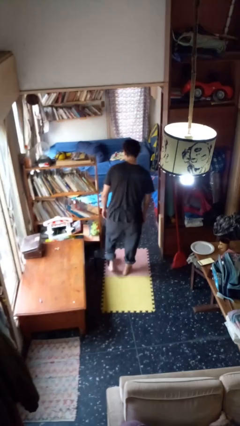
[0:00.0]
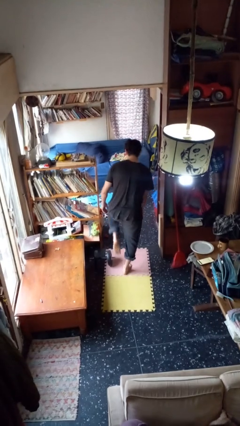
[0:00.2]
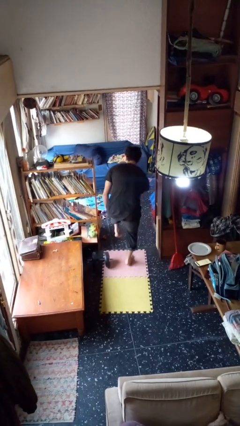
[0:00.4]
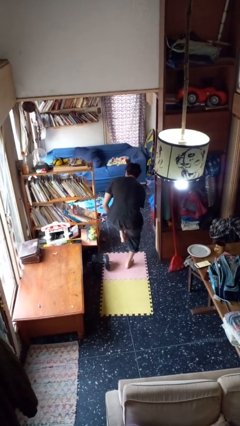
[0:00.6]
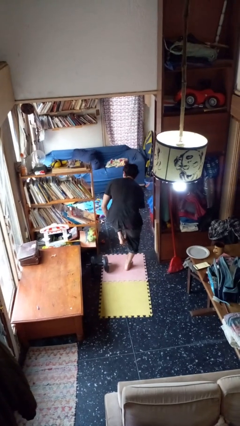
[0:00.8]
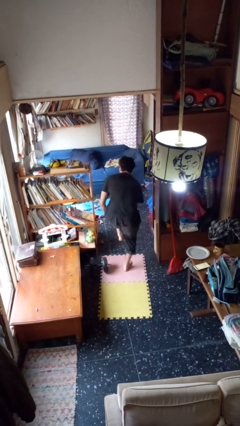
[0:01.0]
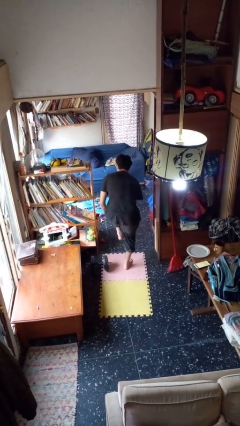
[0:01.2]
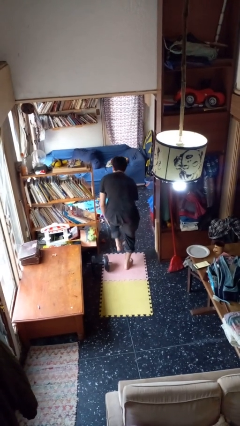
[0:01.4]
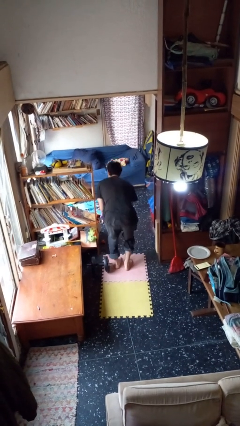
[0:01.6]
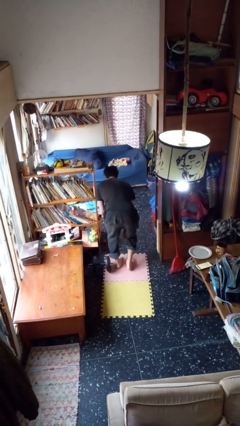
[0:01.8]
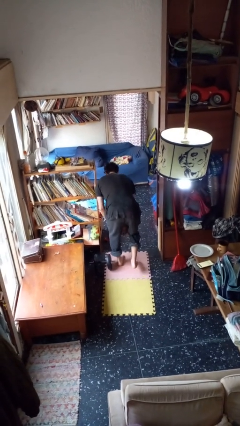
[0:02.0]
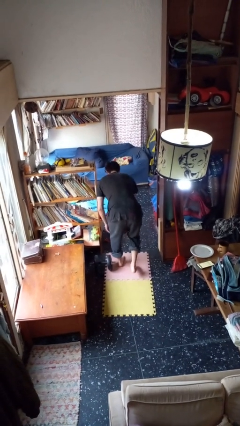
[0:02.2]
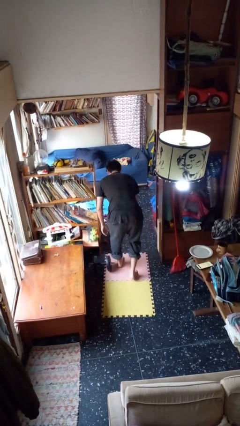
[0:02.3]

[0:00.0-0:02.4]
person stubs toe

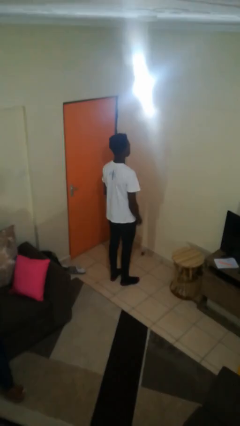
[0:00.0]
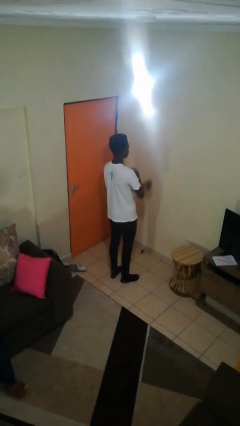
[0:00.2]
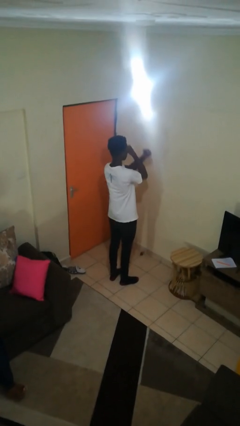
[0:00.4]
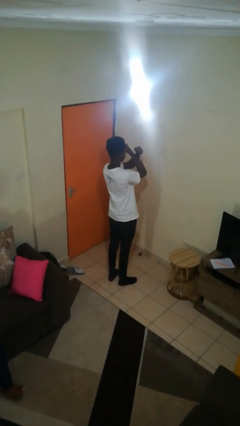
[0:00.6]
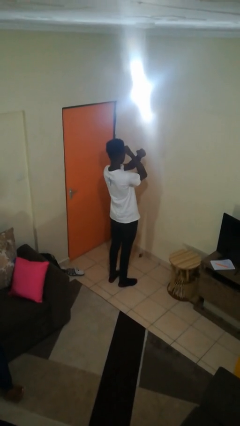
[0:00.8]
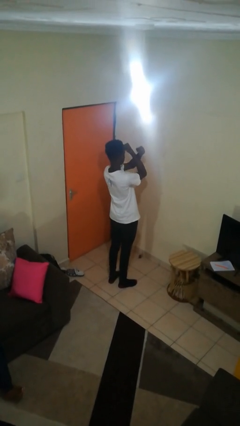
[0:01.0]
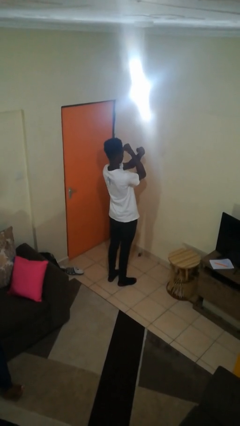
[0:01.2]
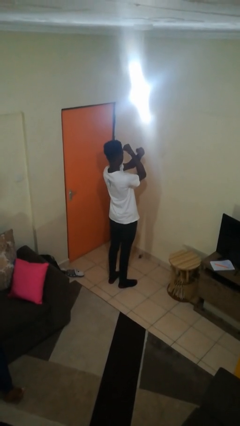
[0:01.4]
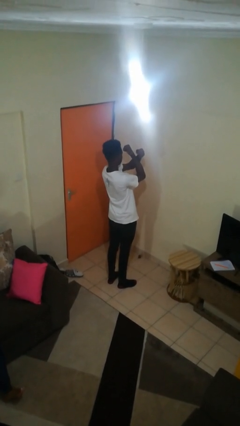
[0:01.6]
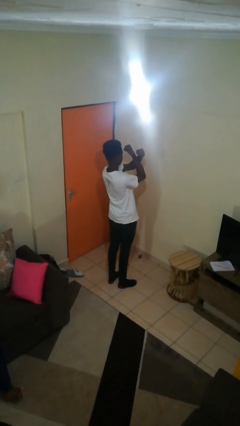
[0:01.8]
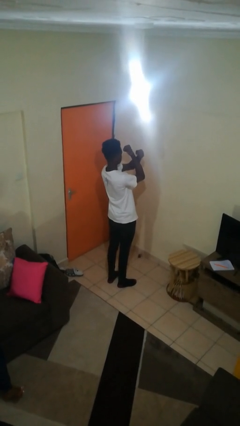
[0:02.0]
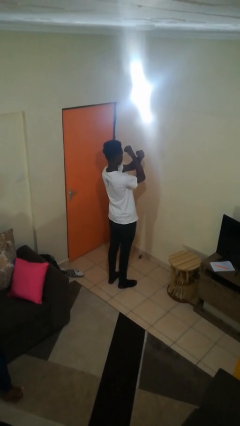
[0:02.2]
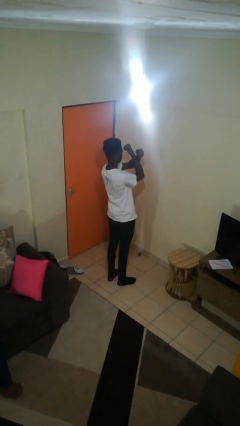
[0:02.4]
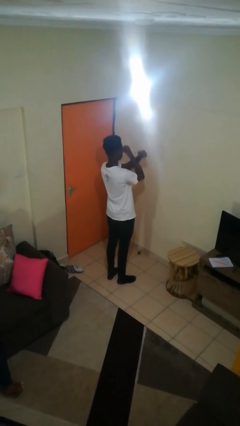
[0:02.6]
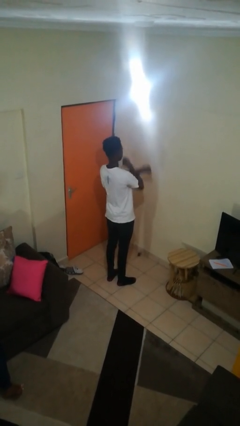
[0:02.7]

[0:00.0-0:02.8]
person gestures arms x

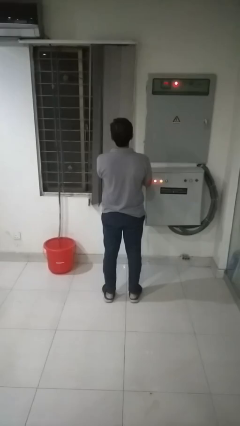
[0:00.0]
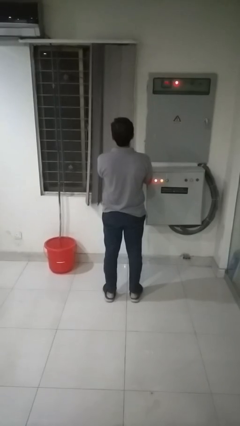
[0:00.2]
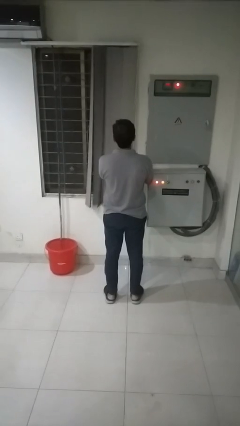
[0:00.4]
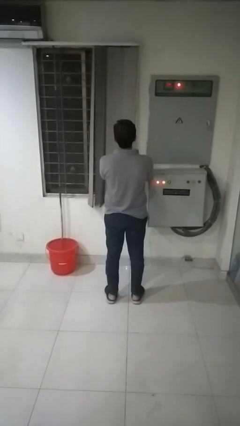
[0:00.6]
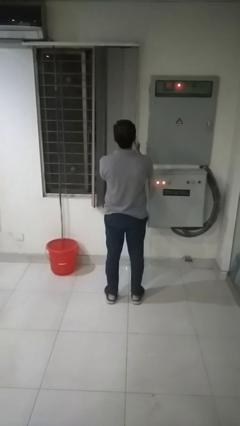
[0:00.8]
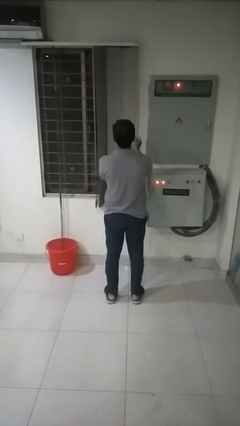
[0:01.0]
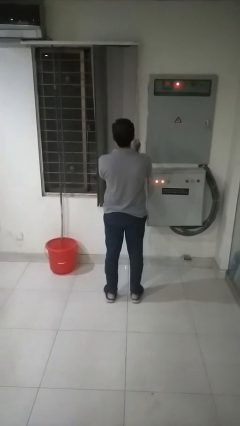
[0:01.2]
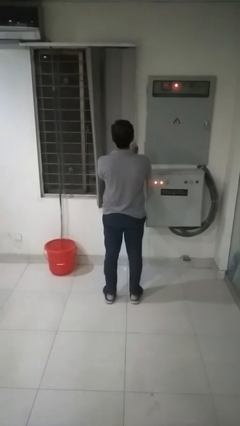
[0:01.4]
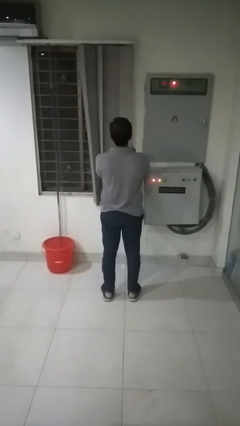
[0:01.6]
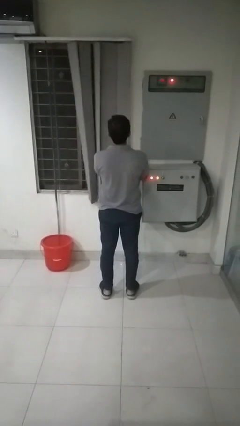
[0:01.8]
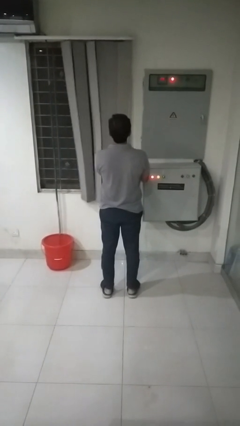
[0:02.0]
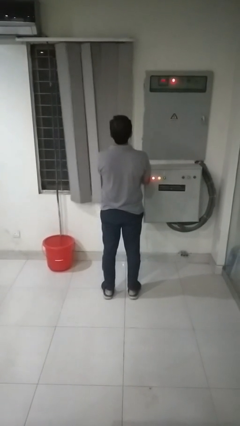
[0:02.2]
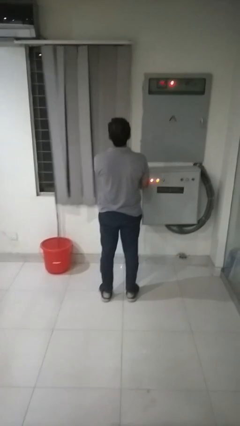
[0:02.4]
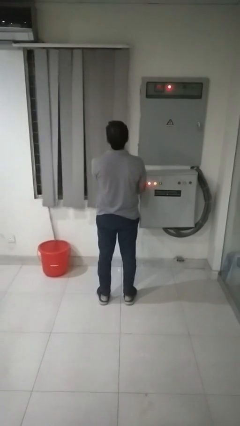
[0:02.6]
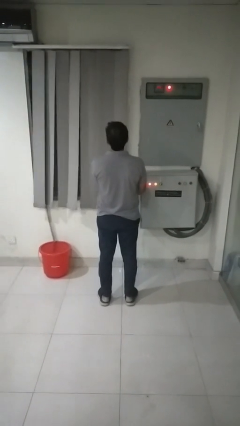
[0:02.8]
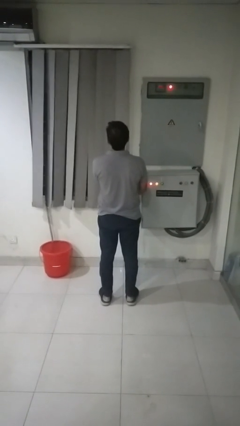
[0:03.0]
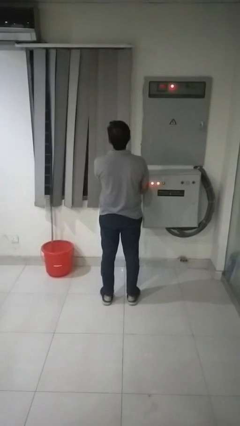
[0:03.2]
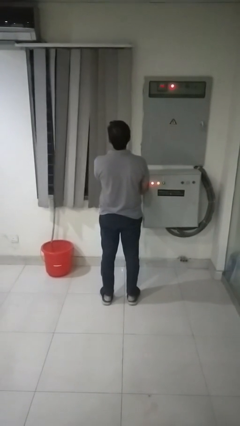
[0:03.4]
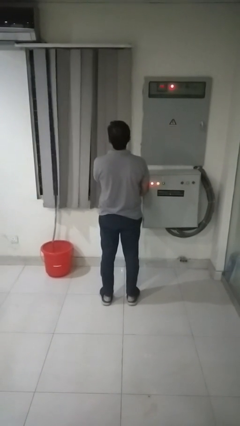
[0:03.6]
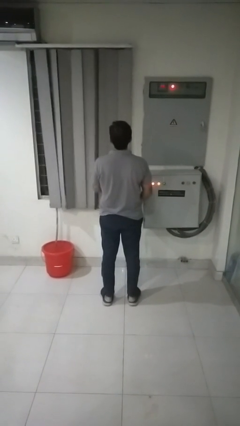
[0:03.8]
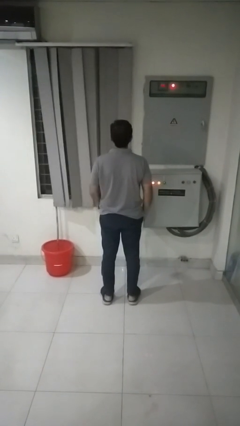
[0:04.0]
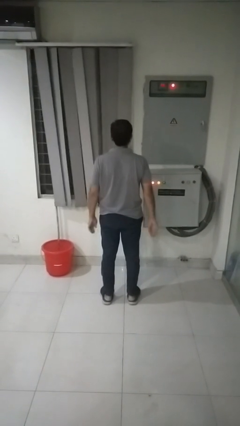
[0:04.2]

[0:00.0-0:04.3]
person closes curtains

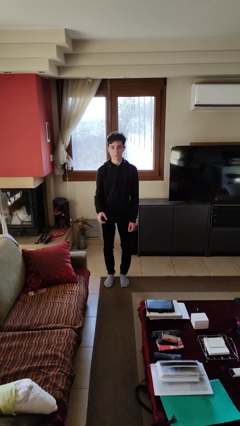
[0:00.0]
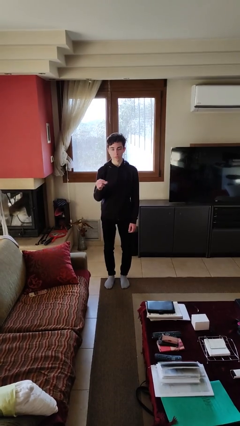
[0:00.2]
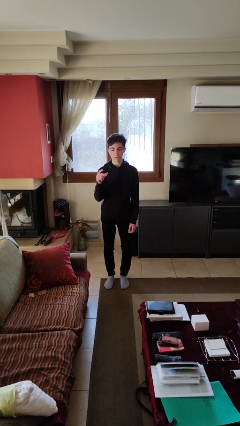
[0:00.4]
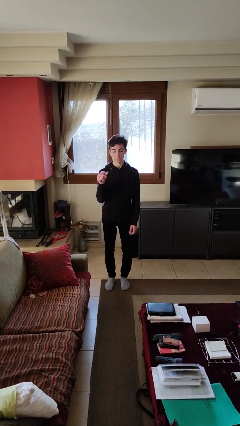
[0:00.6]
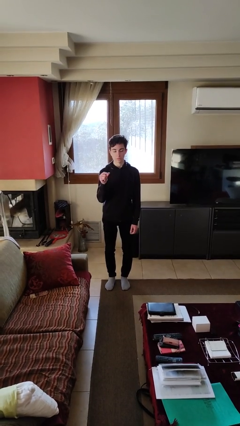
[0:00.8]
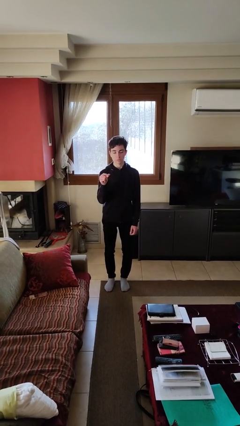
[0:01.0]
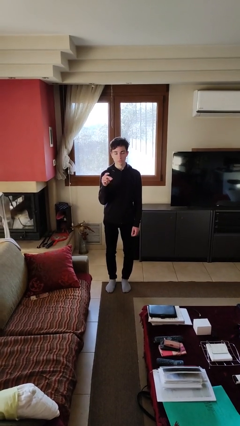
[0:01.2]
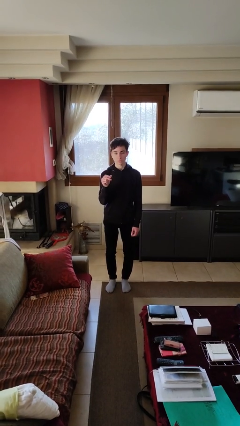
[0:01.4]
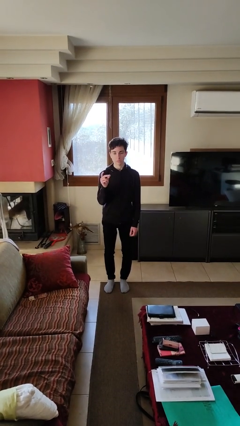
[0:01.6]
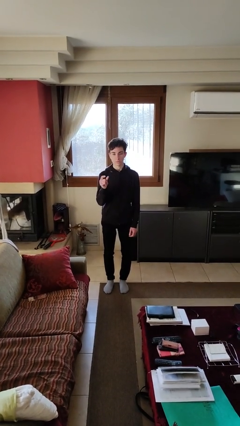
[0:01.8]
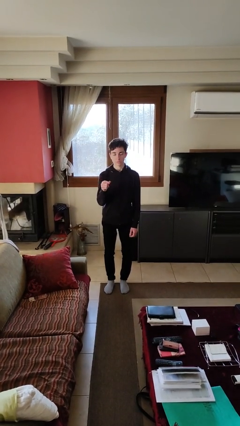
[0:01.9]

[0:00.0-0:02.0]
person snaps fingers

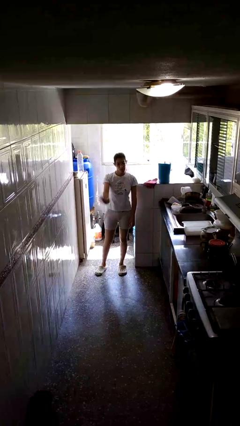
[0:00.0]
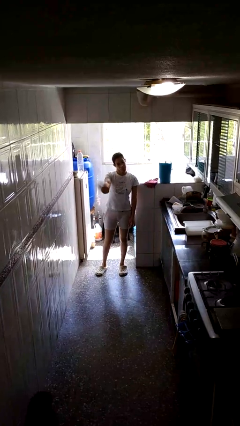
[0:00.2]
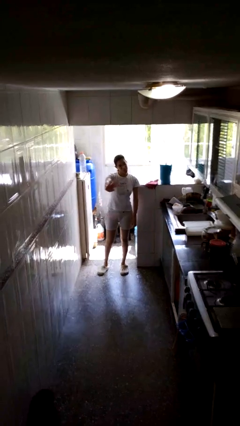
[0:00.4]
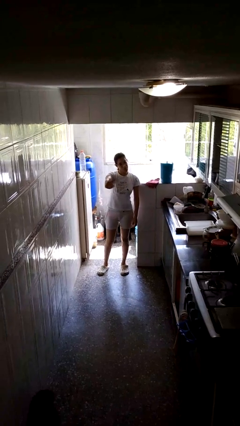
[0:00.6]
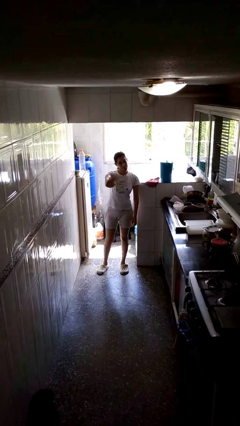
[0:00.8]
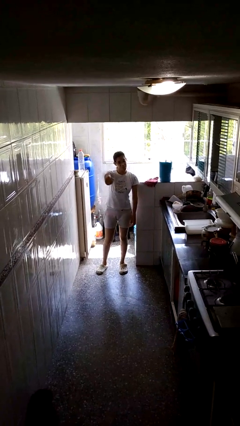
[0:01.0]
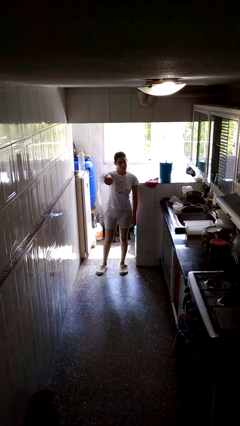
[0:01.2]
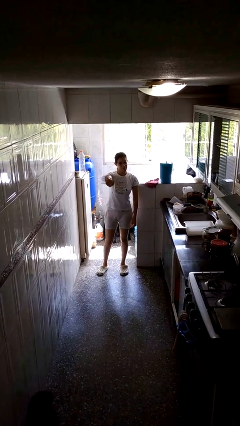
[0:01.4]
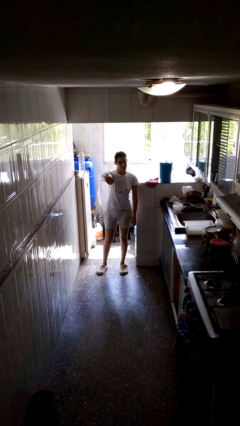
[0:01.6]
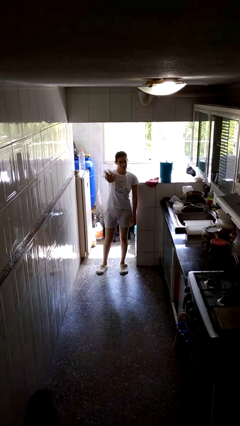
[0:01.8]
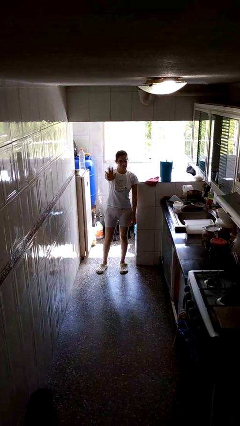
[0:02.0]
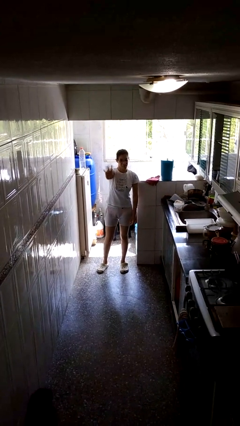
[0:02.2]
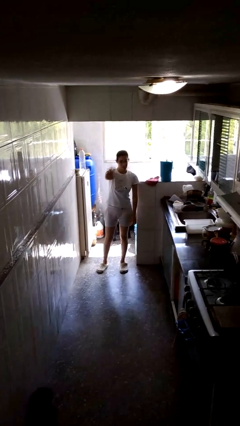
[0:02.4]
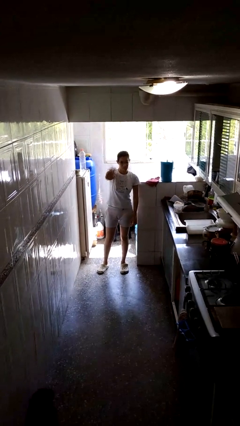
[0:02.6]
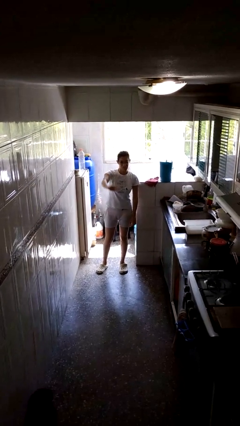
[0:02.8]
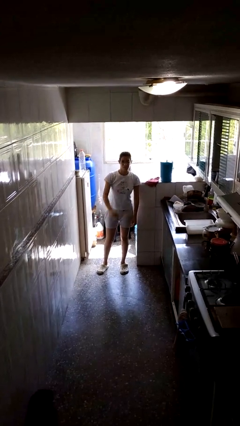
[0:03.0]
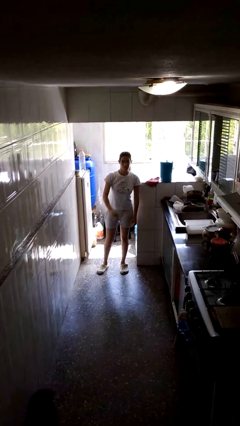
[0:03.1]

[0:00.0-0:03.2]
person waves at person

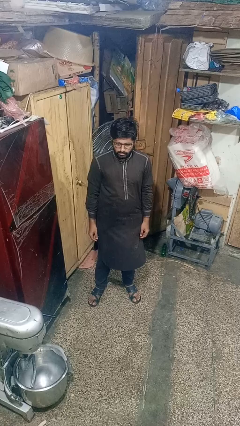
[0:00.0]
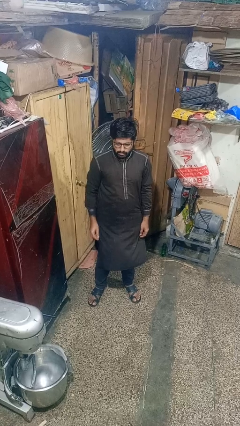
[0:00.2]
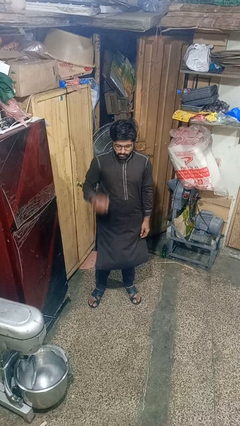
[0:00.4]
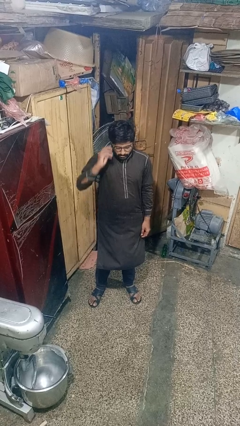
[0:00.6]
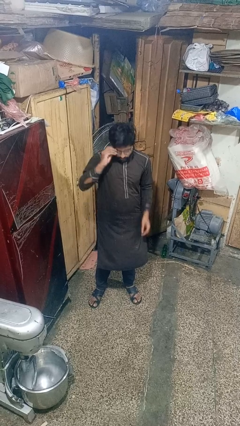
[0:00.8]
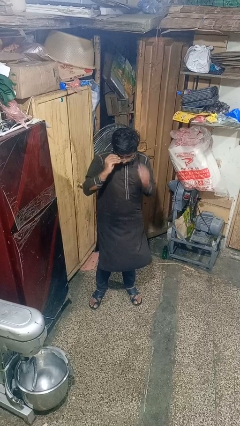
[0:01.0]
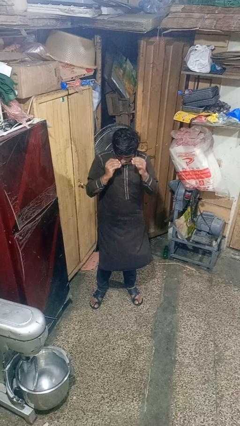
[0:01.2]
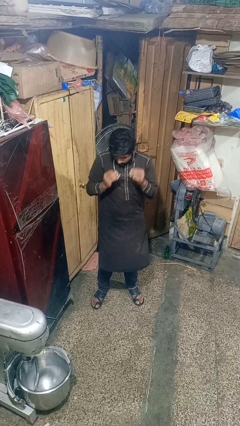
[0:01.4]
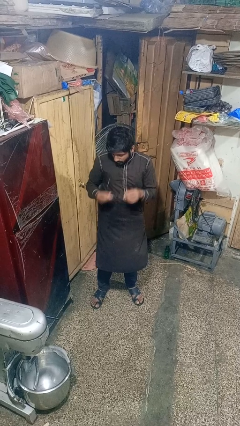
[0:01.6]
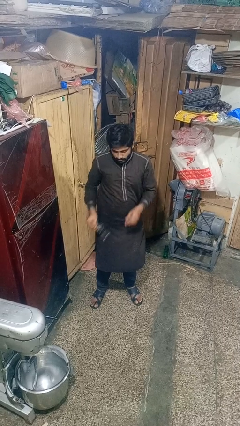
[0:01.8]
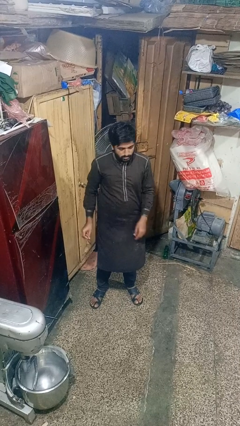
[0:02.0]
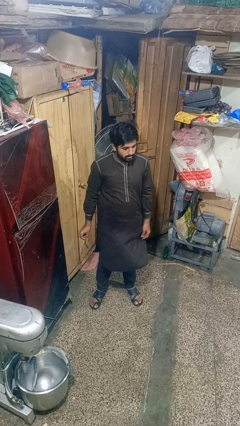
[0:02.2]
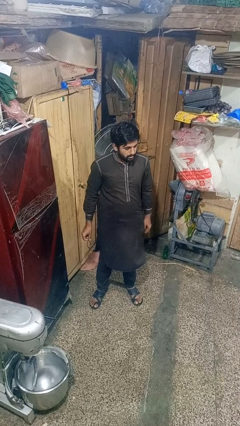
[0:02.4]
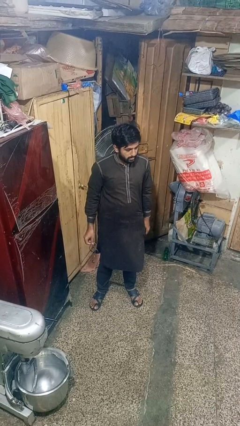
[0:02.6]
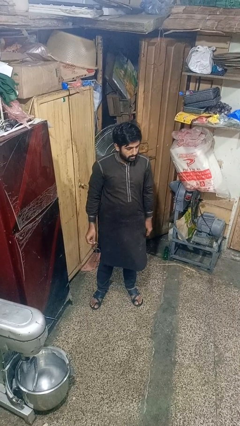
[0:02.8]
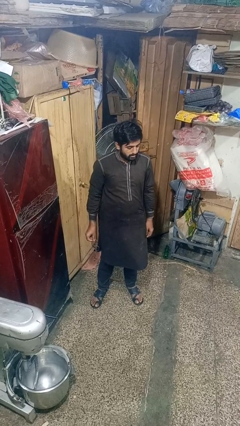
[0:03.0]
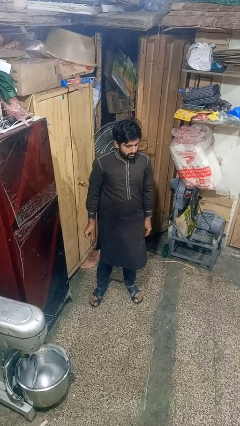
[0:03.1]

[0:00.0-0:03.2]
person takes off glasses
